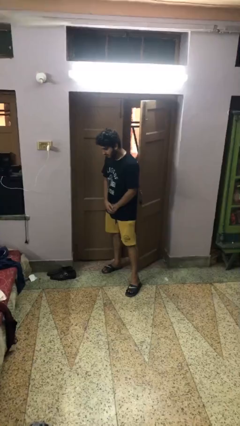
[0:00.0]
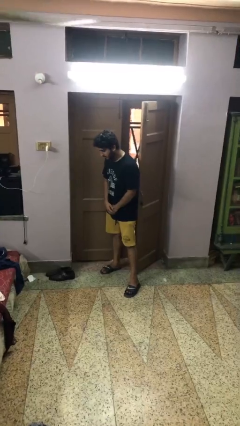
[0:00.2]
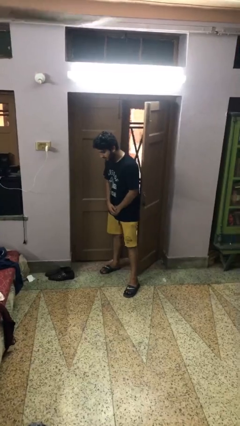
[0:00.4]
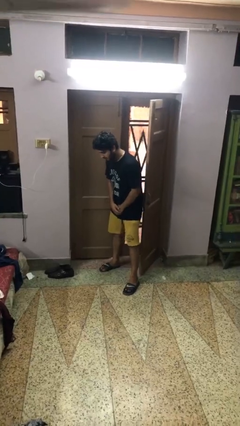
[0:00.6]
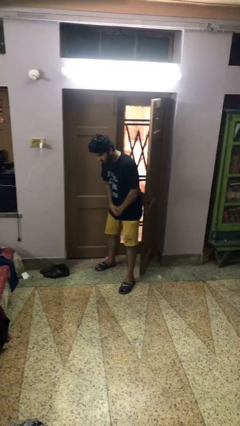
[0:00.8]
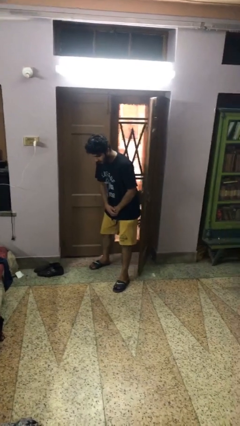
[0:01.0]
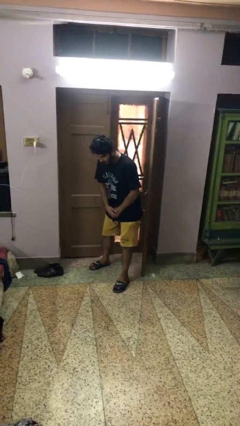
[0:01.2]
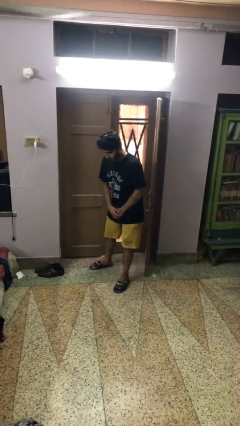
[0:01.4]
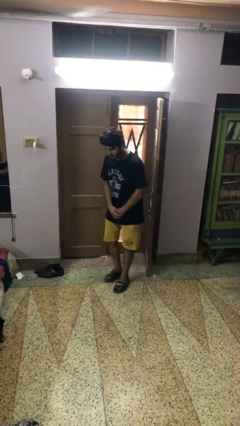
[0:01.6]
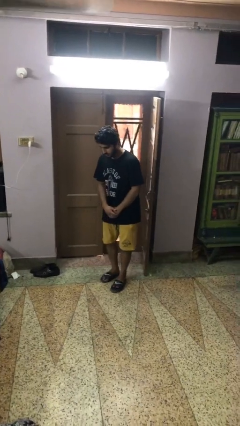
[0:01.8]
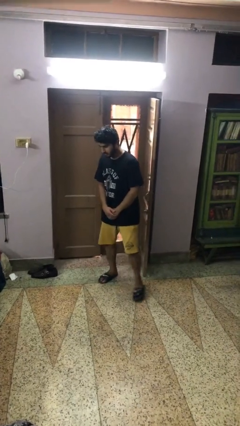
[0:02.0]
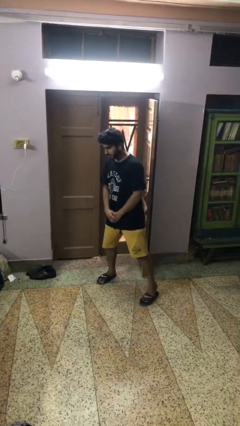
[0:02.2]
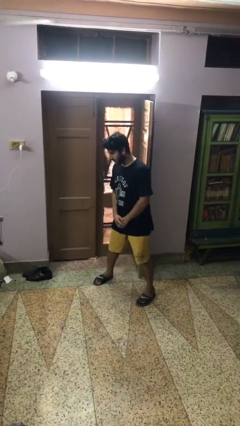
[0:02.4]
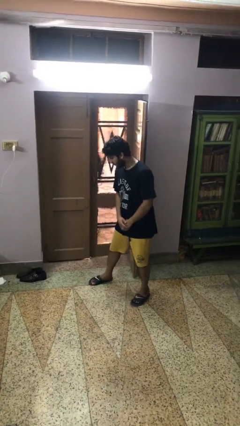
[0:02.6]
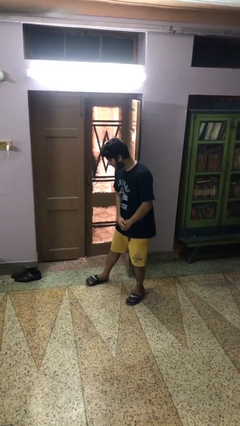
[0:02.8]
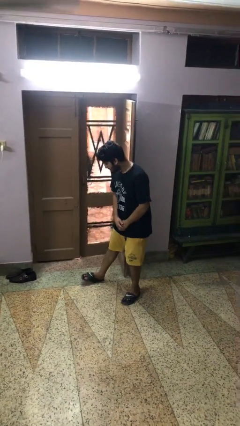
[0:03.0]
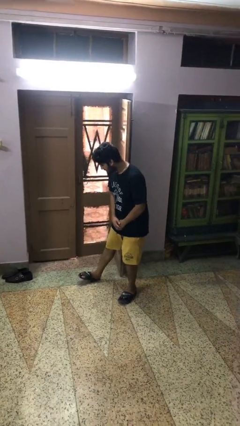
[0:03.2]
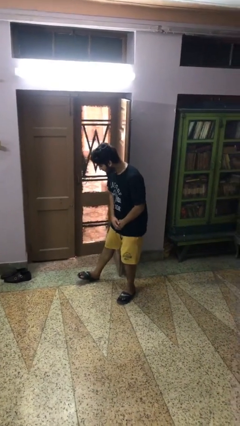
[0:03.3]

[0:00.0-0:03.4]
person opens facility door

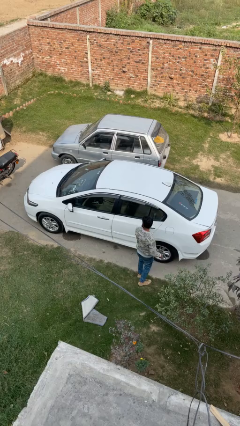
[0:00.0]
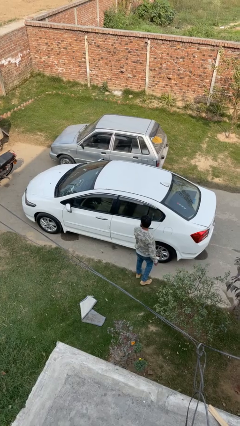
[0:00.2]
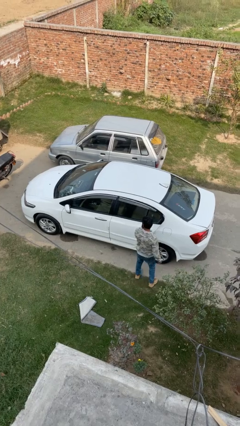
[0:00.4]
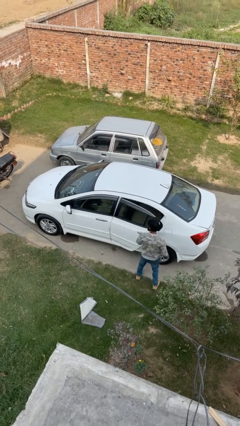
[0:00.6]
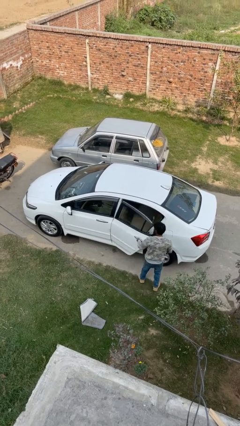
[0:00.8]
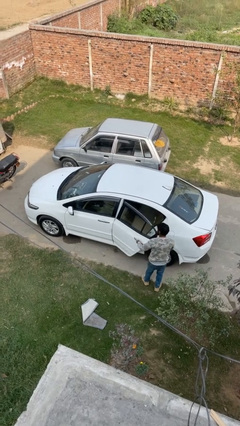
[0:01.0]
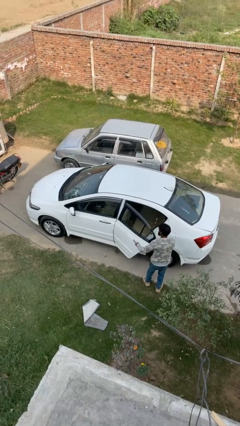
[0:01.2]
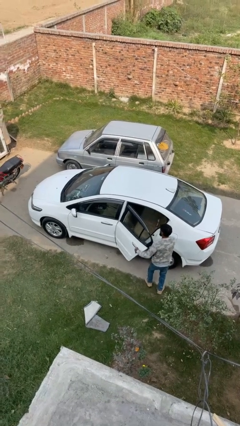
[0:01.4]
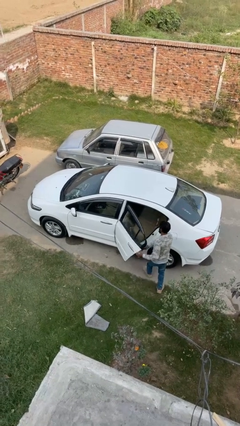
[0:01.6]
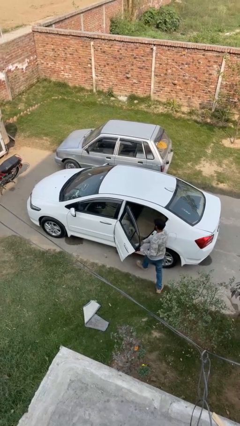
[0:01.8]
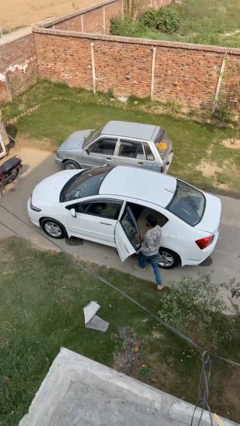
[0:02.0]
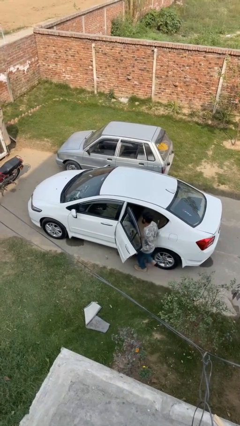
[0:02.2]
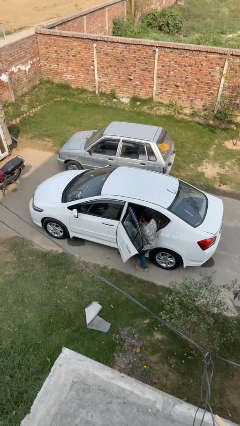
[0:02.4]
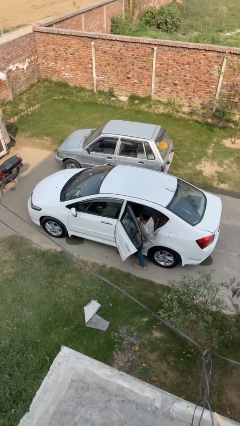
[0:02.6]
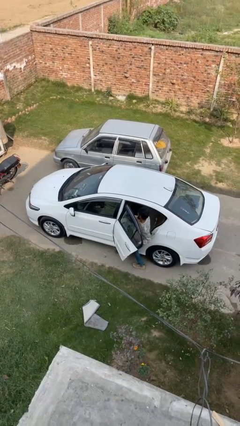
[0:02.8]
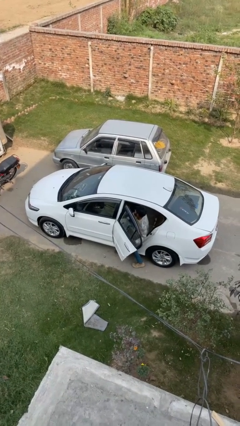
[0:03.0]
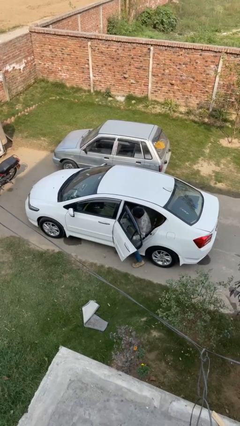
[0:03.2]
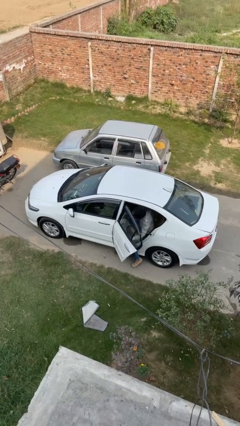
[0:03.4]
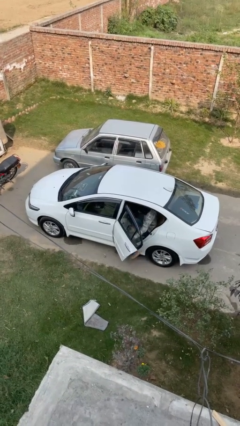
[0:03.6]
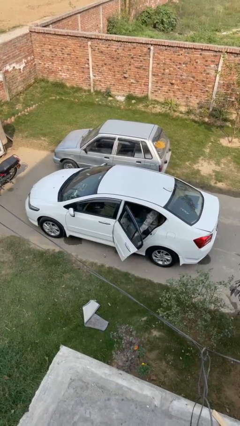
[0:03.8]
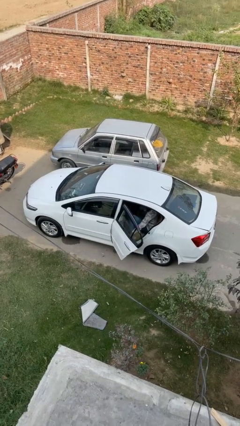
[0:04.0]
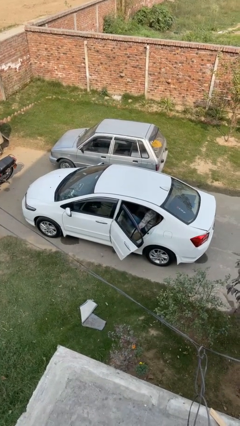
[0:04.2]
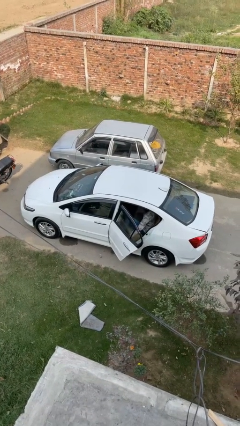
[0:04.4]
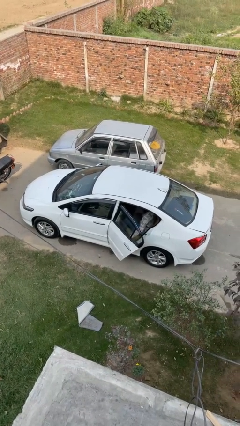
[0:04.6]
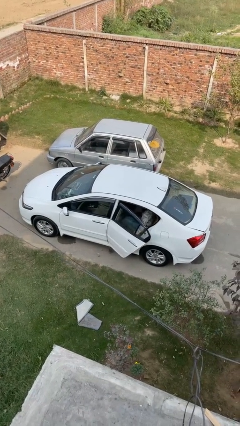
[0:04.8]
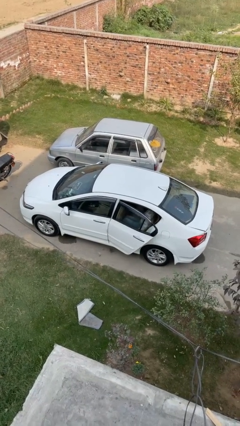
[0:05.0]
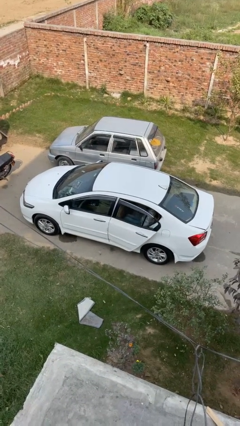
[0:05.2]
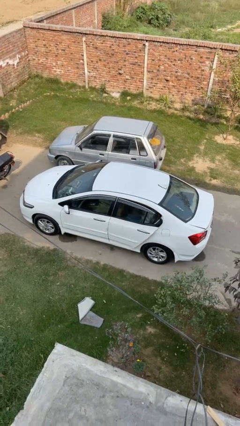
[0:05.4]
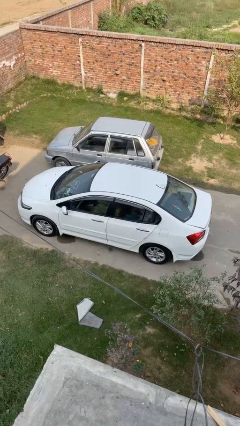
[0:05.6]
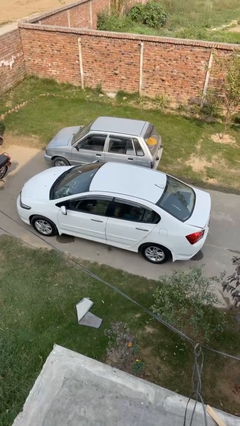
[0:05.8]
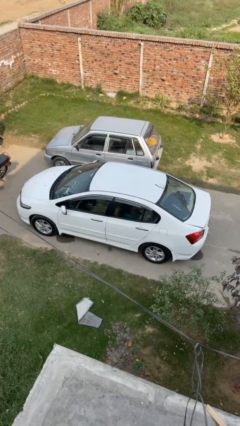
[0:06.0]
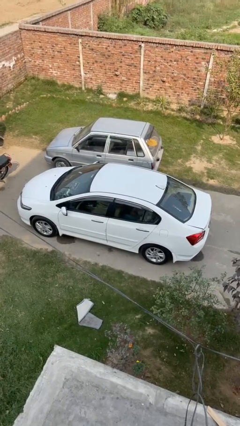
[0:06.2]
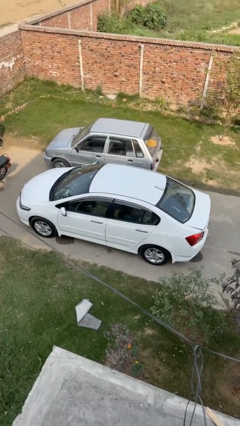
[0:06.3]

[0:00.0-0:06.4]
car picks up person

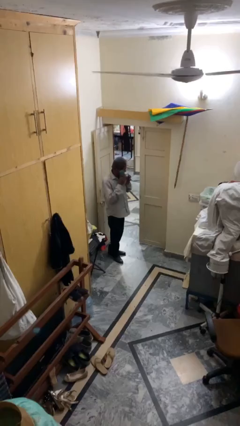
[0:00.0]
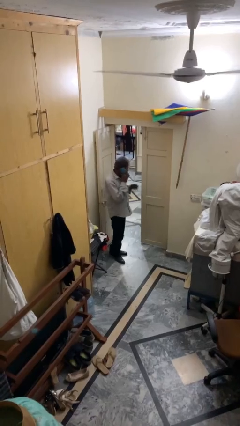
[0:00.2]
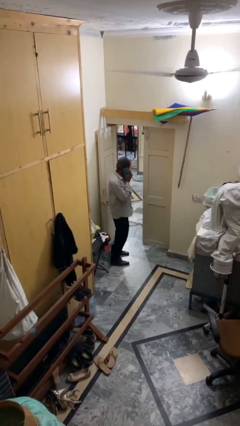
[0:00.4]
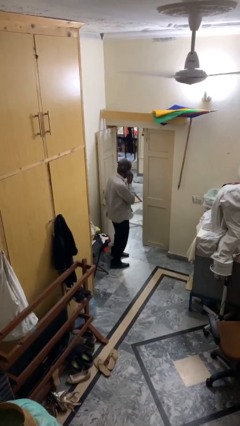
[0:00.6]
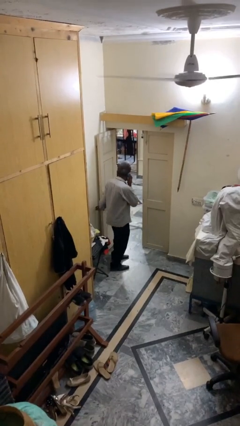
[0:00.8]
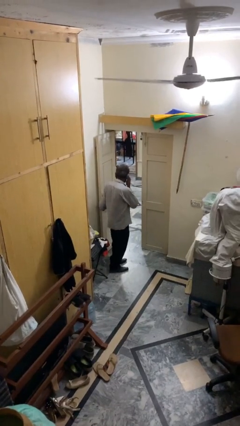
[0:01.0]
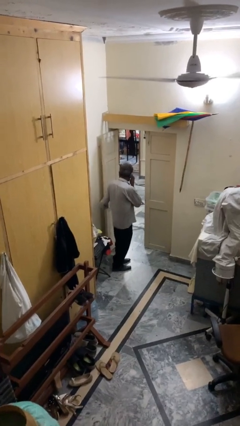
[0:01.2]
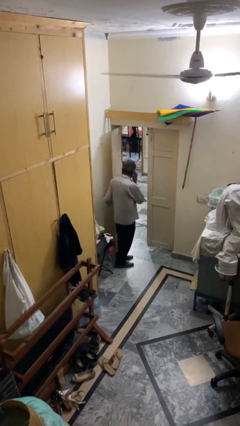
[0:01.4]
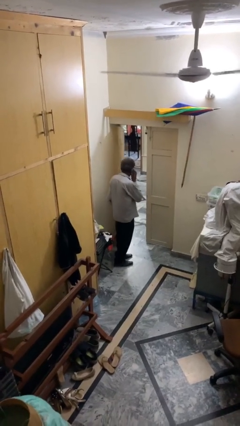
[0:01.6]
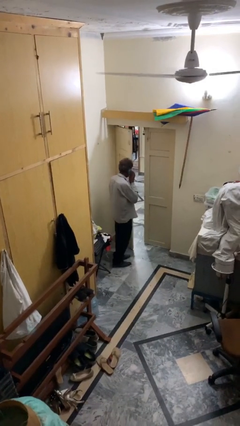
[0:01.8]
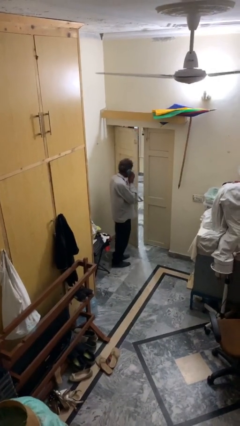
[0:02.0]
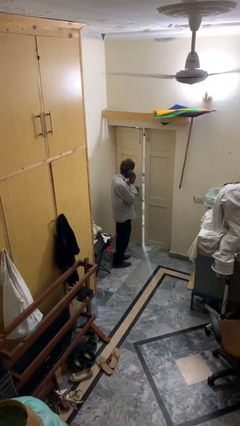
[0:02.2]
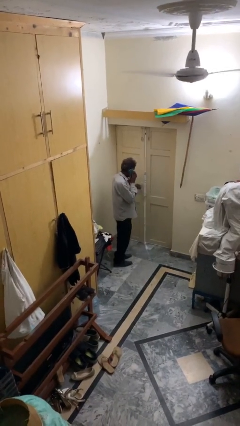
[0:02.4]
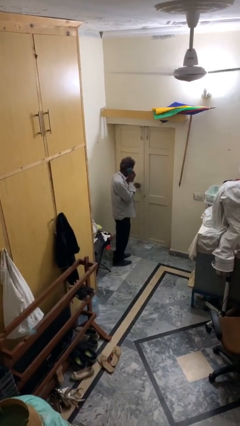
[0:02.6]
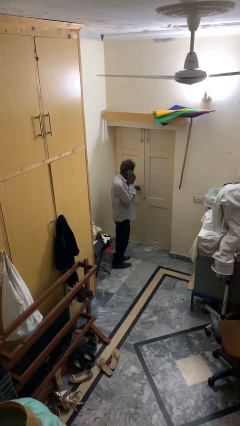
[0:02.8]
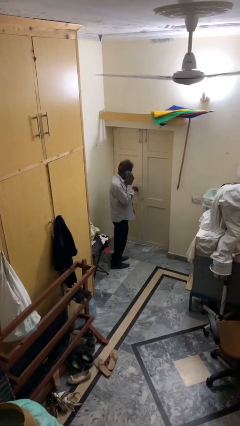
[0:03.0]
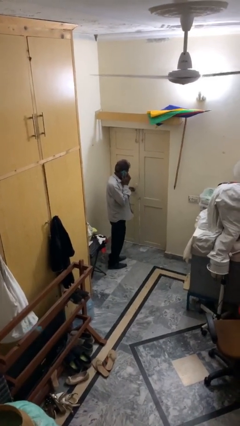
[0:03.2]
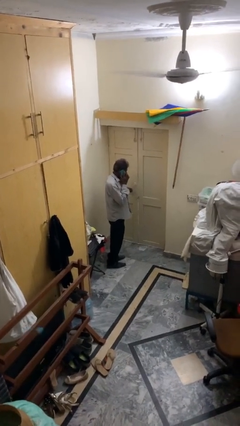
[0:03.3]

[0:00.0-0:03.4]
person closes facility door

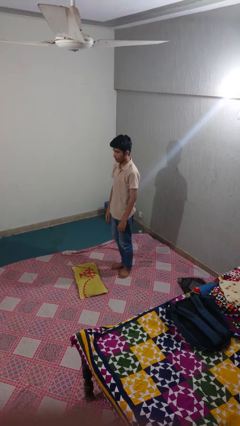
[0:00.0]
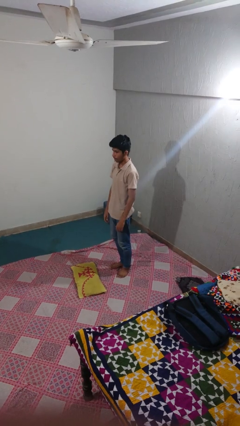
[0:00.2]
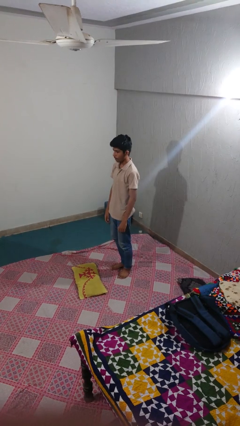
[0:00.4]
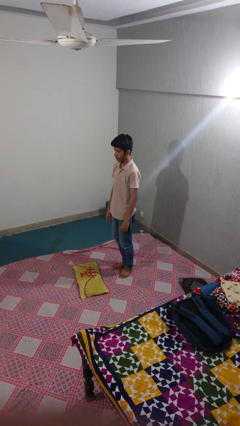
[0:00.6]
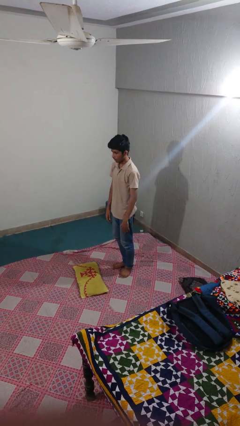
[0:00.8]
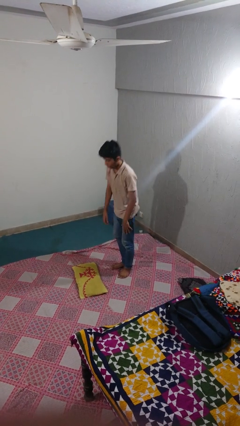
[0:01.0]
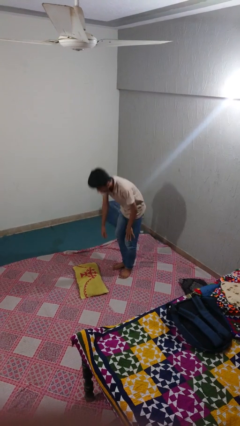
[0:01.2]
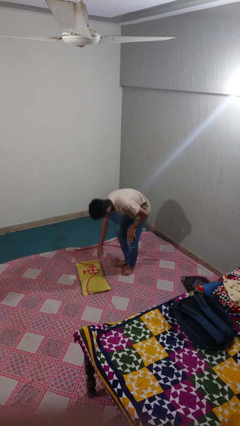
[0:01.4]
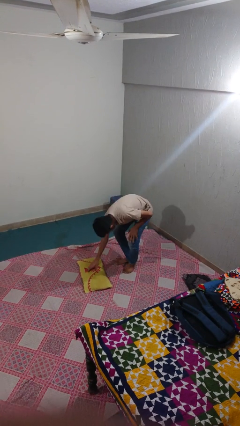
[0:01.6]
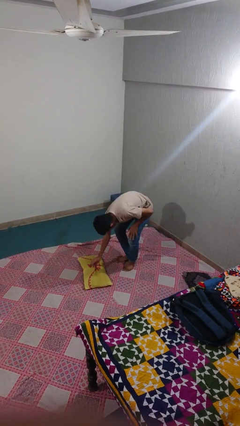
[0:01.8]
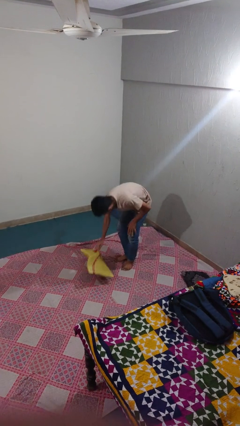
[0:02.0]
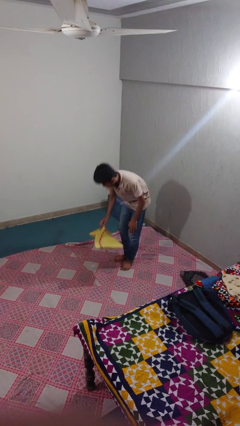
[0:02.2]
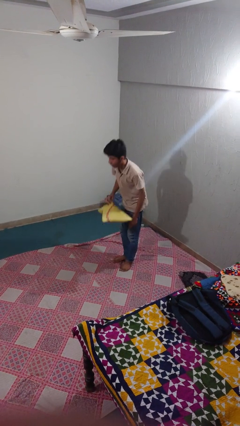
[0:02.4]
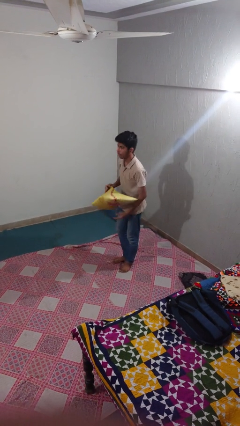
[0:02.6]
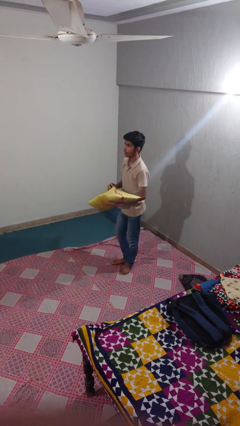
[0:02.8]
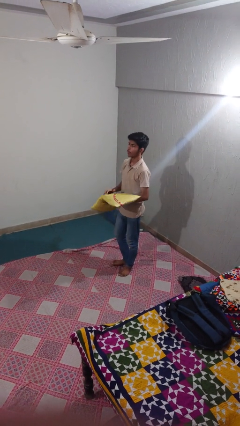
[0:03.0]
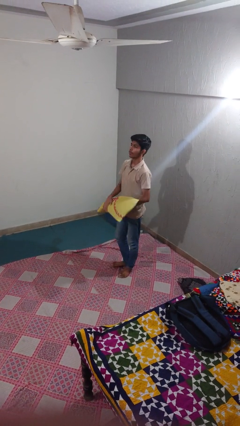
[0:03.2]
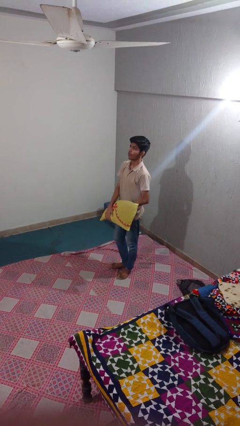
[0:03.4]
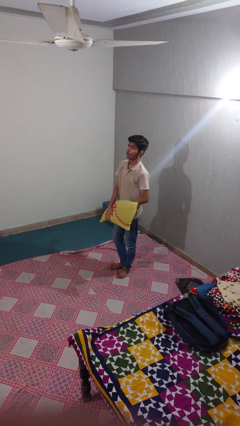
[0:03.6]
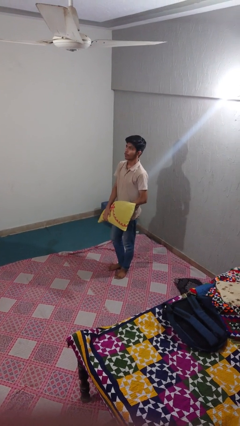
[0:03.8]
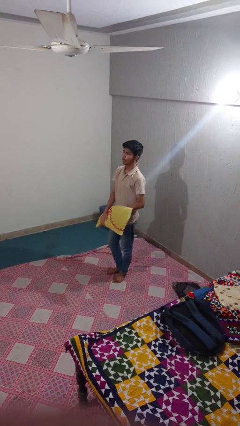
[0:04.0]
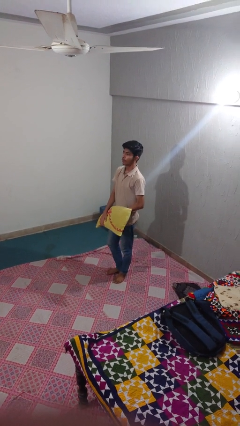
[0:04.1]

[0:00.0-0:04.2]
person picks up object from floor

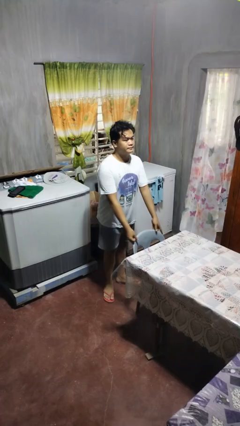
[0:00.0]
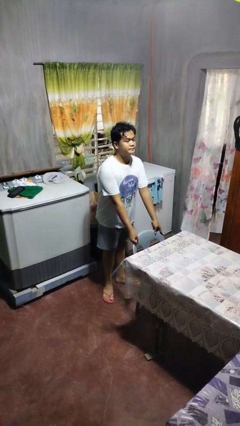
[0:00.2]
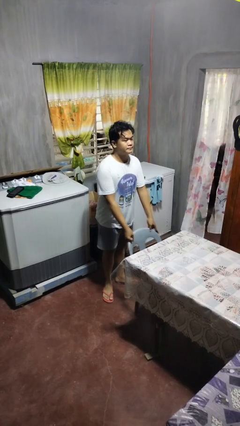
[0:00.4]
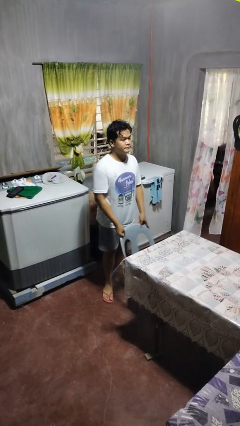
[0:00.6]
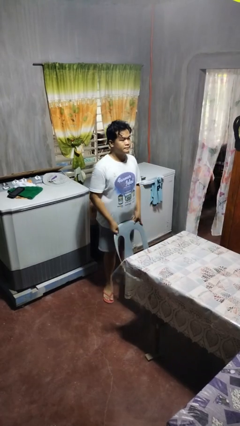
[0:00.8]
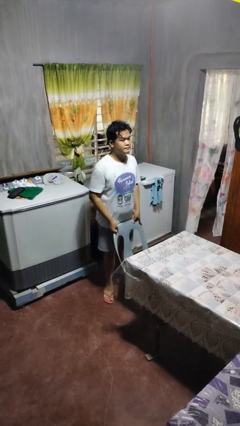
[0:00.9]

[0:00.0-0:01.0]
person pulls out chair
